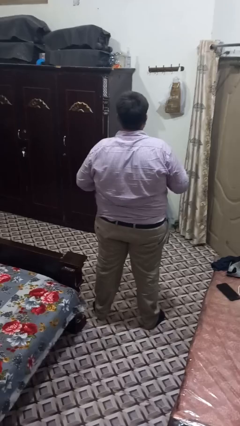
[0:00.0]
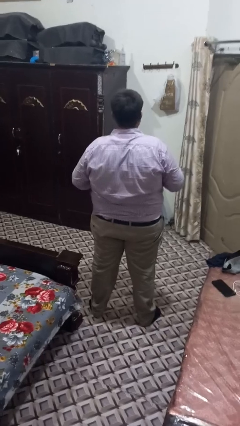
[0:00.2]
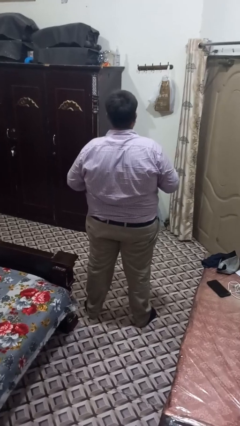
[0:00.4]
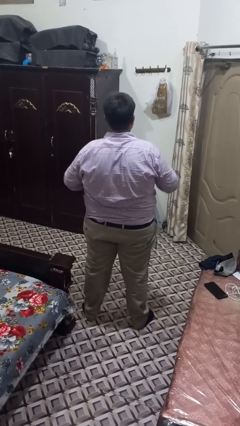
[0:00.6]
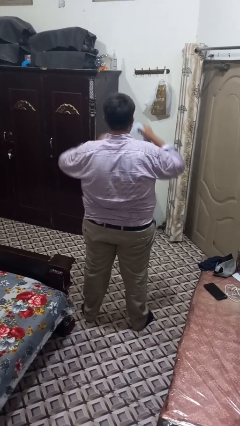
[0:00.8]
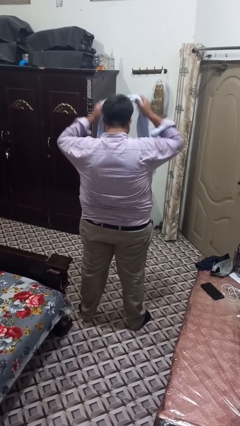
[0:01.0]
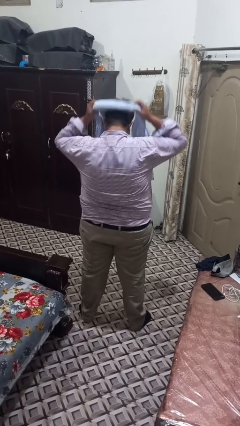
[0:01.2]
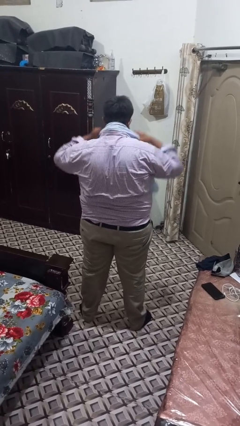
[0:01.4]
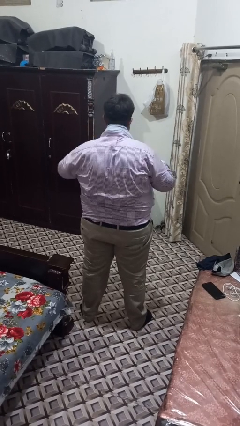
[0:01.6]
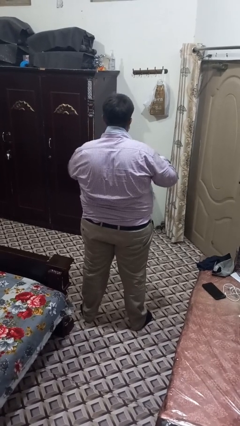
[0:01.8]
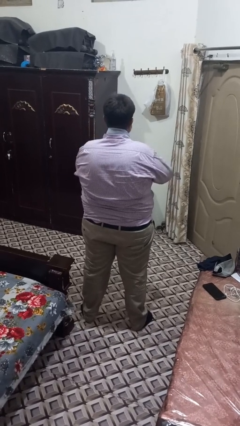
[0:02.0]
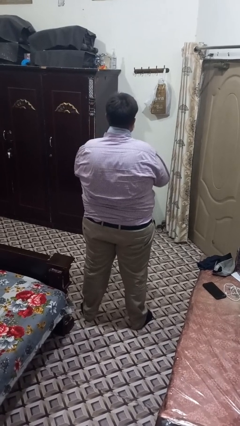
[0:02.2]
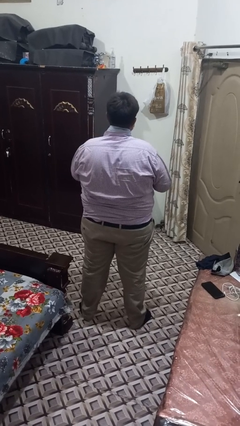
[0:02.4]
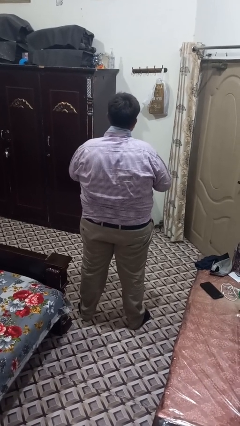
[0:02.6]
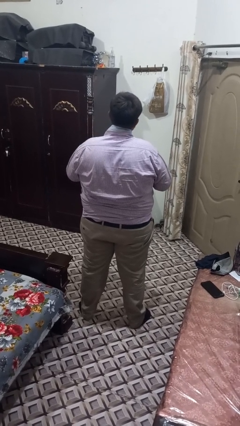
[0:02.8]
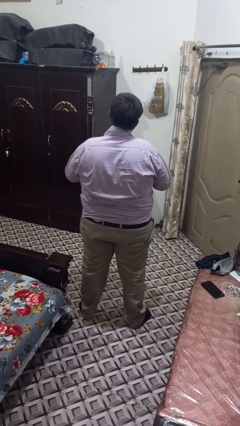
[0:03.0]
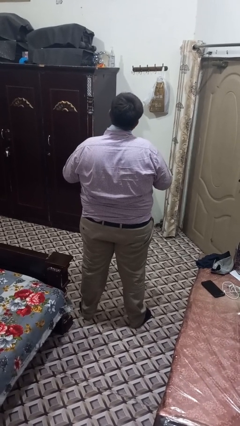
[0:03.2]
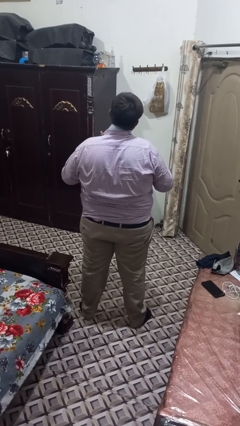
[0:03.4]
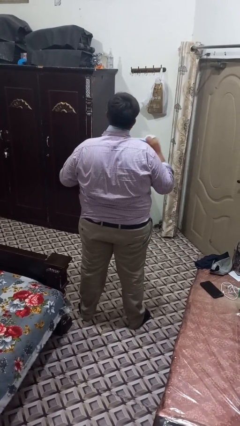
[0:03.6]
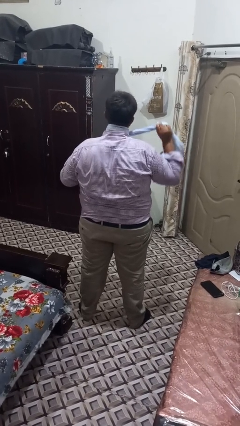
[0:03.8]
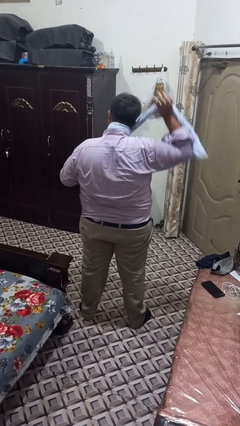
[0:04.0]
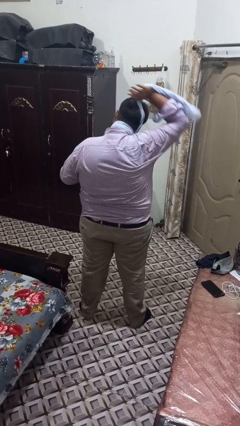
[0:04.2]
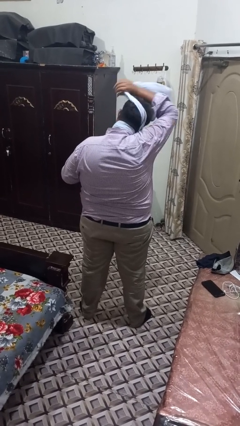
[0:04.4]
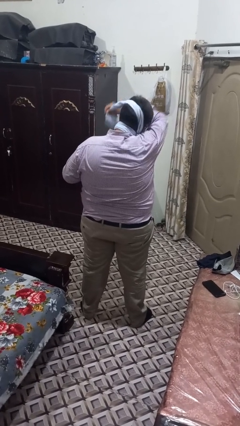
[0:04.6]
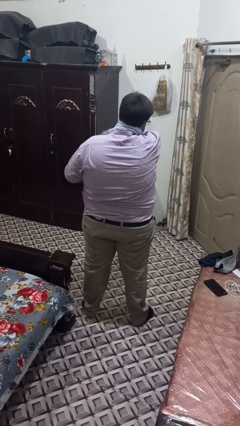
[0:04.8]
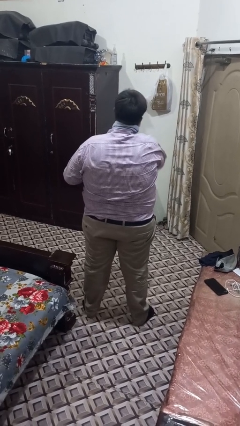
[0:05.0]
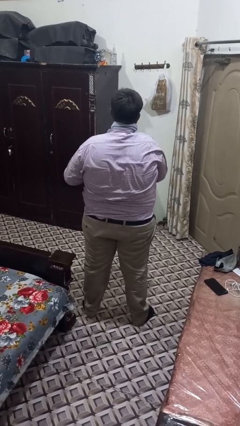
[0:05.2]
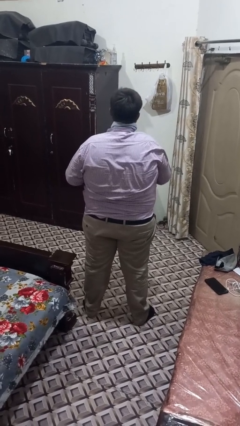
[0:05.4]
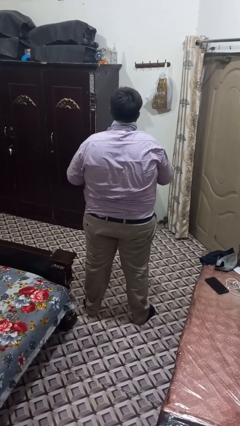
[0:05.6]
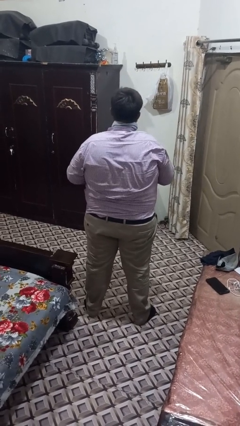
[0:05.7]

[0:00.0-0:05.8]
person puts on scarf

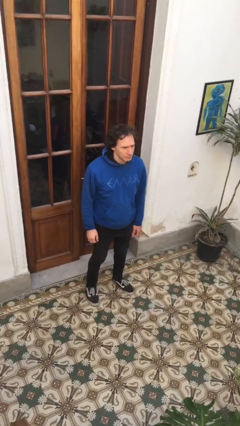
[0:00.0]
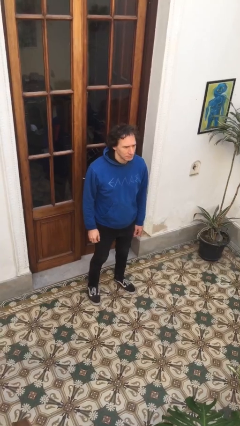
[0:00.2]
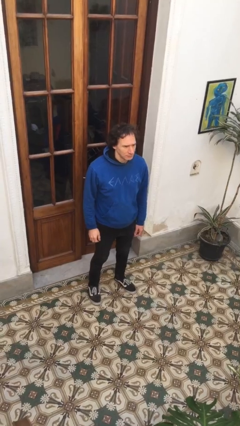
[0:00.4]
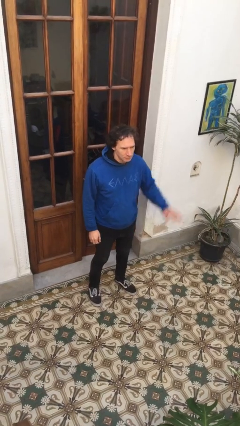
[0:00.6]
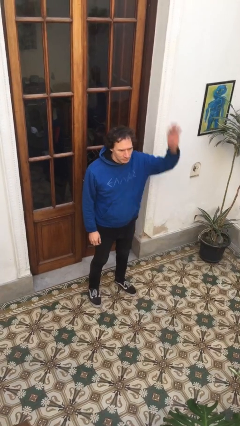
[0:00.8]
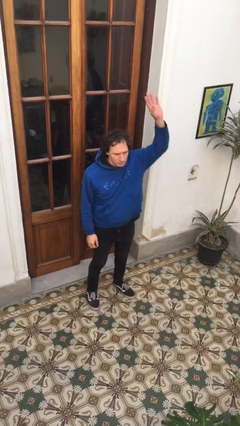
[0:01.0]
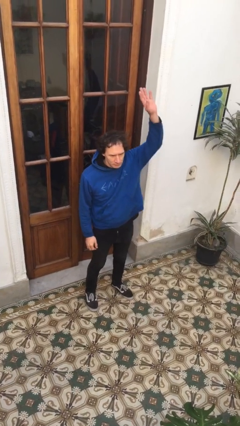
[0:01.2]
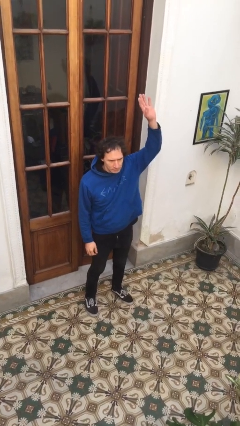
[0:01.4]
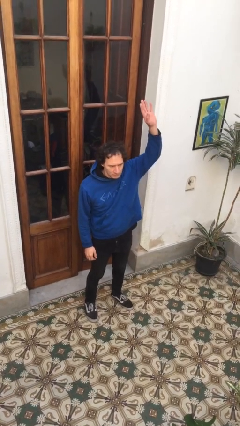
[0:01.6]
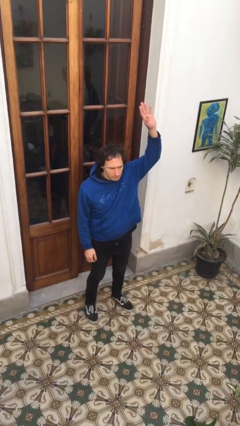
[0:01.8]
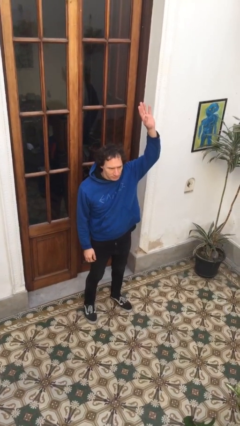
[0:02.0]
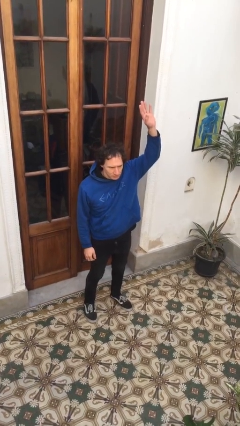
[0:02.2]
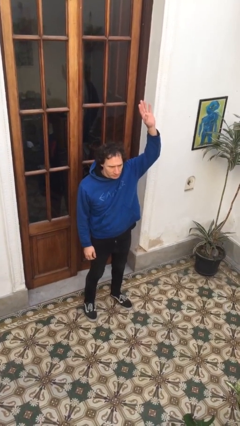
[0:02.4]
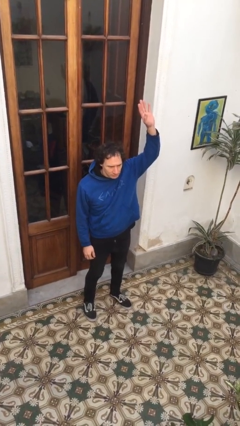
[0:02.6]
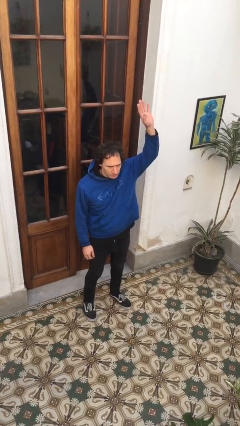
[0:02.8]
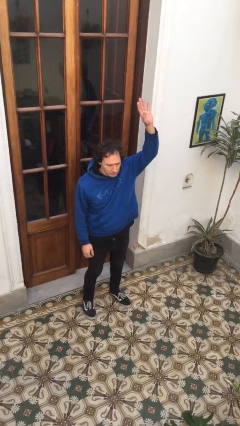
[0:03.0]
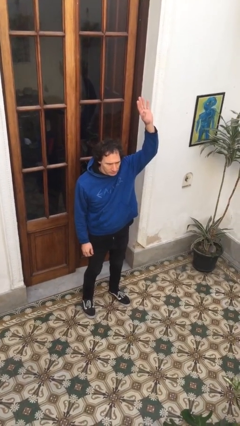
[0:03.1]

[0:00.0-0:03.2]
person gestures raise hand

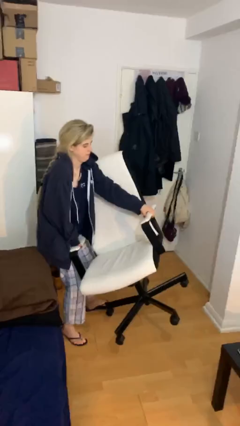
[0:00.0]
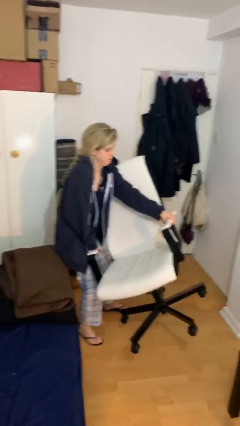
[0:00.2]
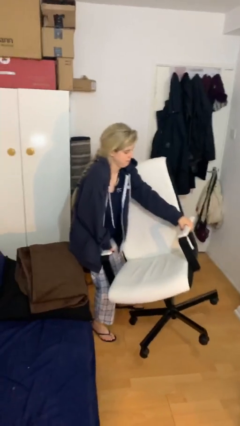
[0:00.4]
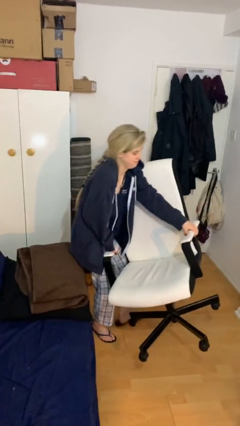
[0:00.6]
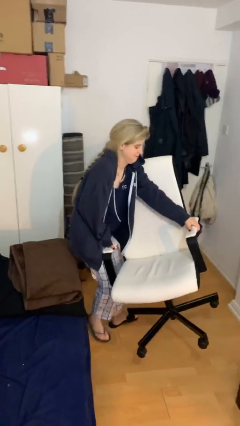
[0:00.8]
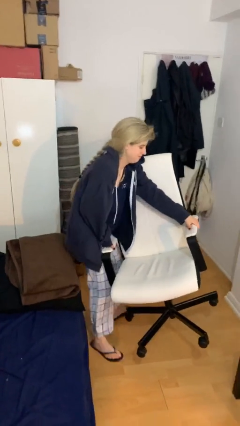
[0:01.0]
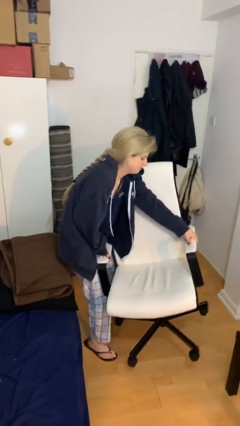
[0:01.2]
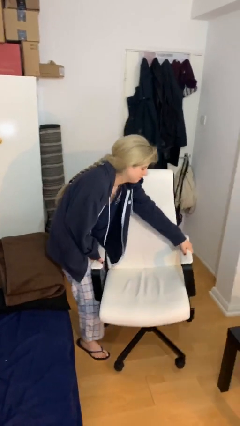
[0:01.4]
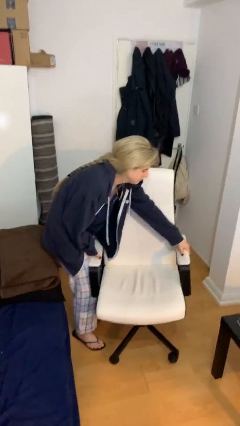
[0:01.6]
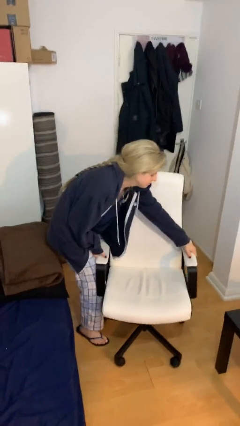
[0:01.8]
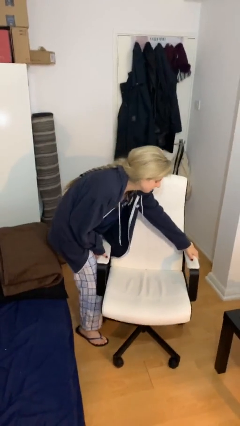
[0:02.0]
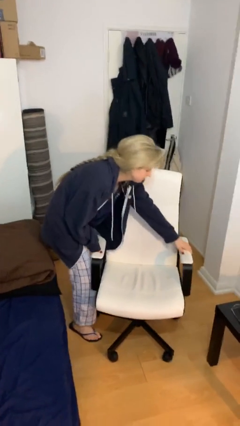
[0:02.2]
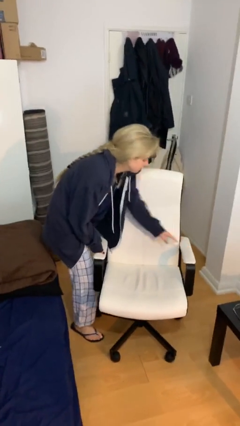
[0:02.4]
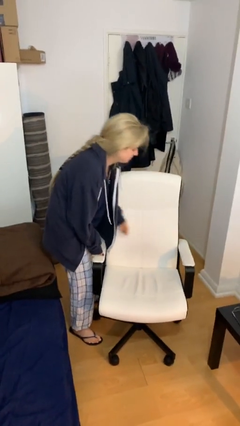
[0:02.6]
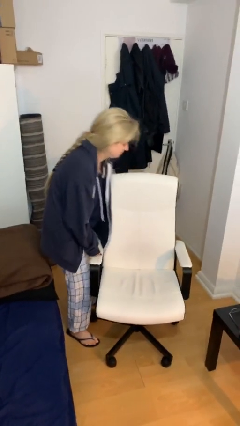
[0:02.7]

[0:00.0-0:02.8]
person puts down object on floor

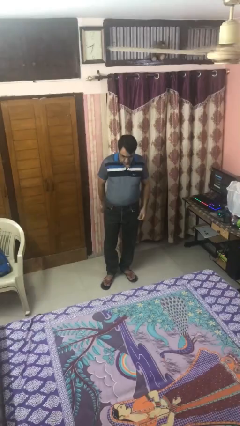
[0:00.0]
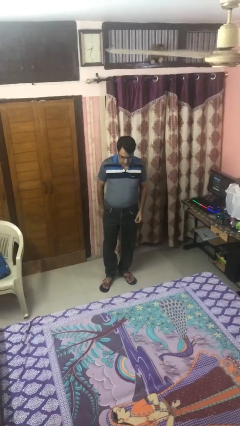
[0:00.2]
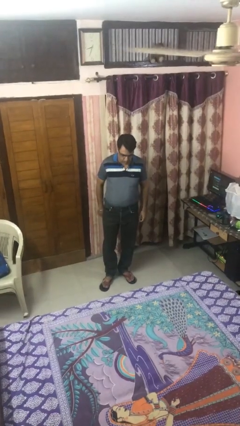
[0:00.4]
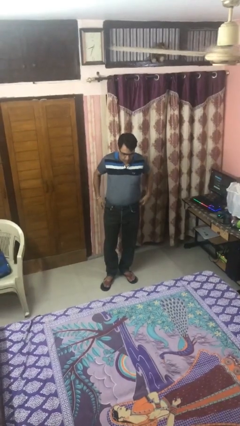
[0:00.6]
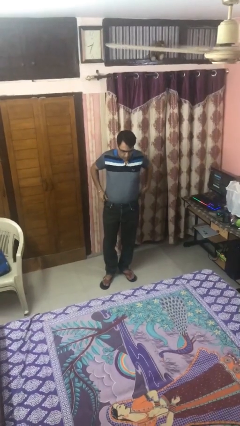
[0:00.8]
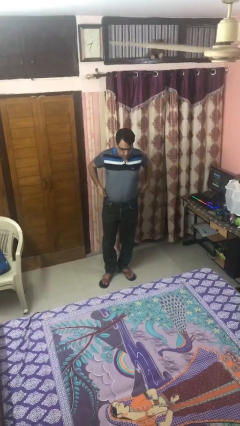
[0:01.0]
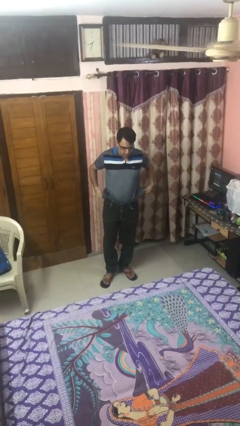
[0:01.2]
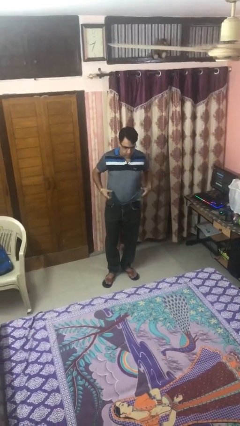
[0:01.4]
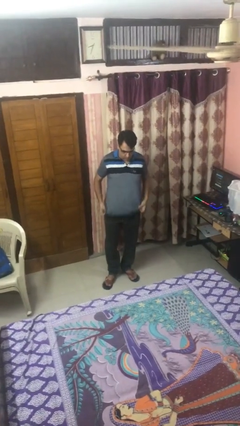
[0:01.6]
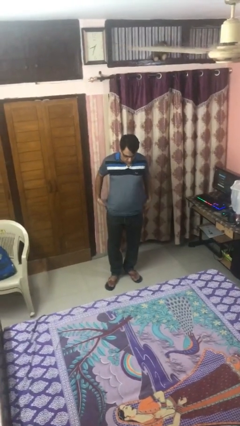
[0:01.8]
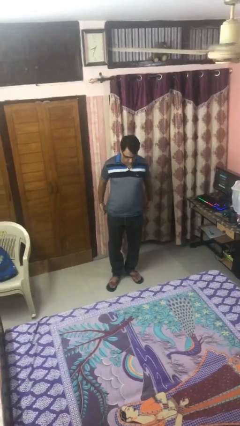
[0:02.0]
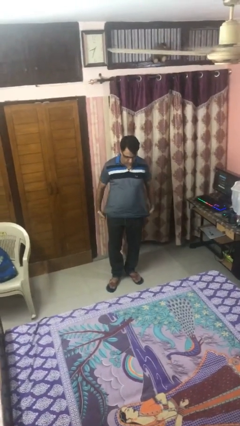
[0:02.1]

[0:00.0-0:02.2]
person untucks shirt

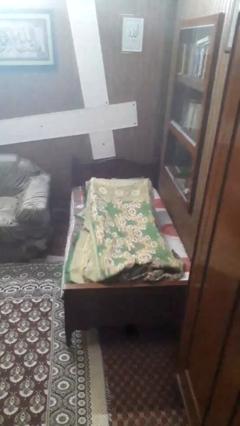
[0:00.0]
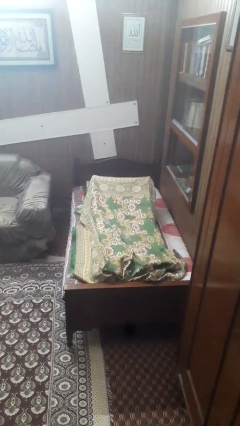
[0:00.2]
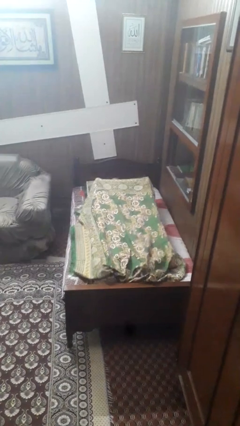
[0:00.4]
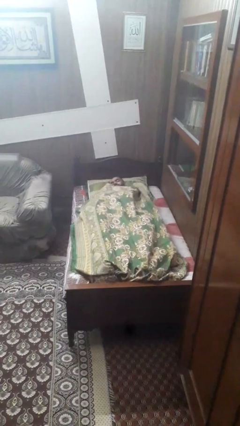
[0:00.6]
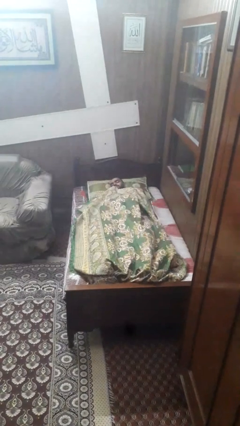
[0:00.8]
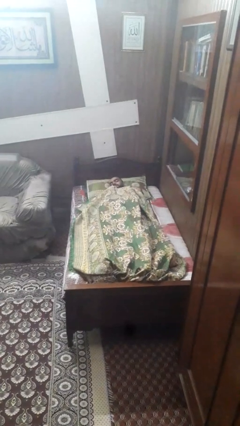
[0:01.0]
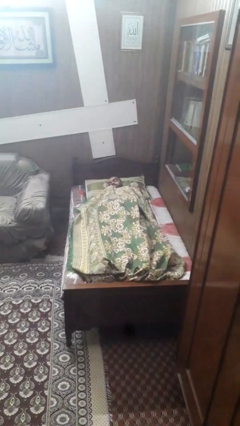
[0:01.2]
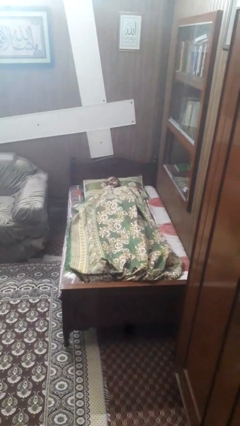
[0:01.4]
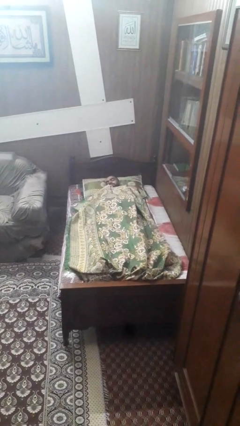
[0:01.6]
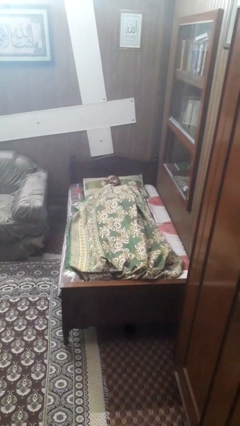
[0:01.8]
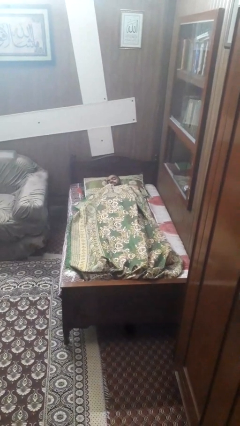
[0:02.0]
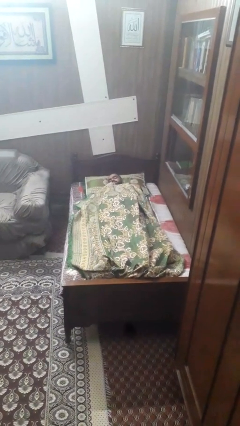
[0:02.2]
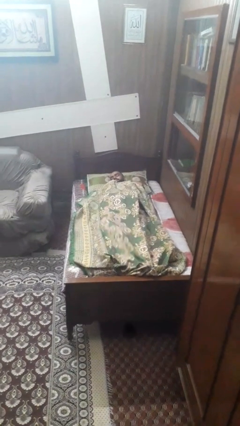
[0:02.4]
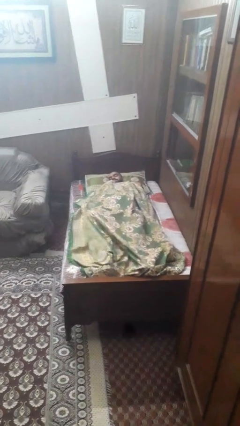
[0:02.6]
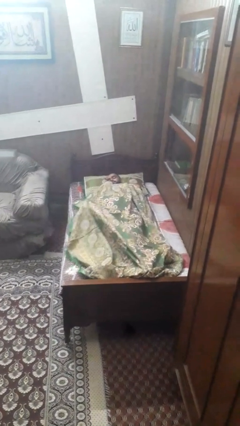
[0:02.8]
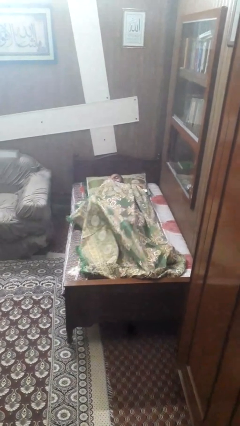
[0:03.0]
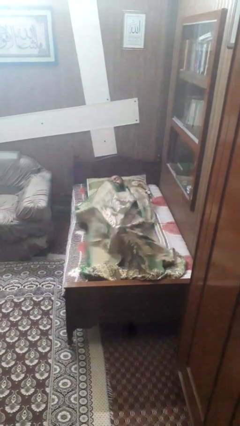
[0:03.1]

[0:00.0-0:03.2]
person covers with bedsheets
